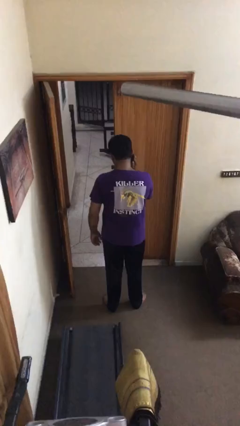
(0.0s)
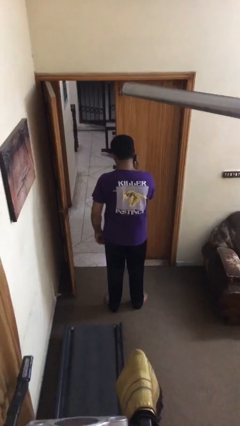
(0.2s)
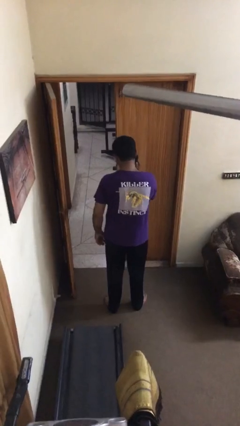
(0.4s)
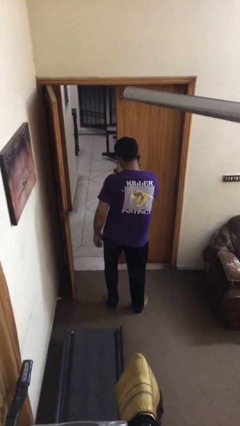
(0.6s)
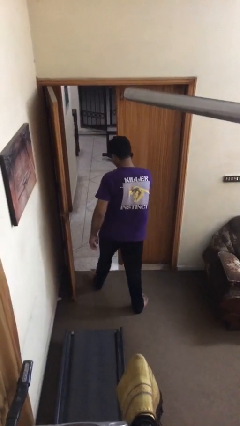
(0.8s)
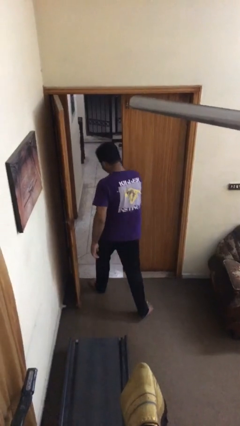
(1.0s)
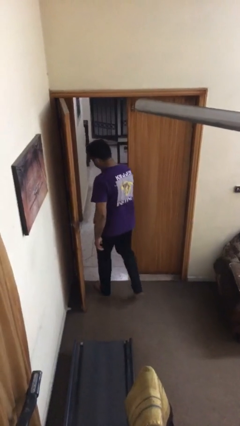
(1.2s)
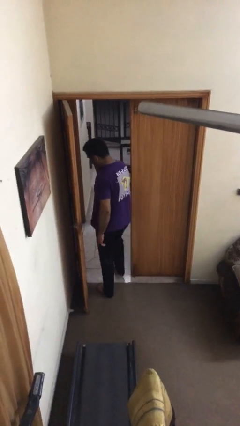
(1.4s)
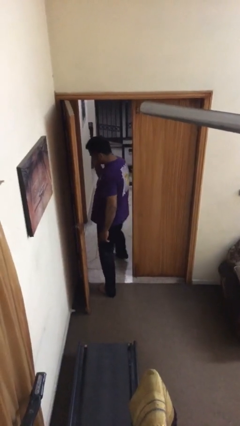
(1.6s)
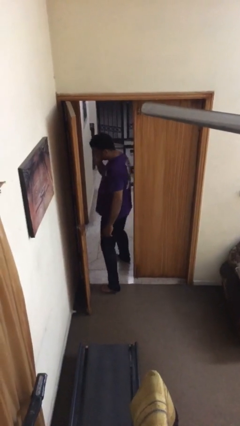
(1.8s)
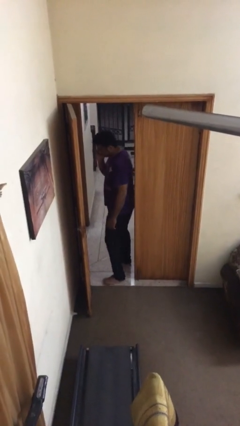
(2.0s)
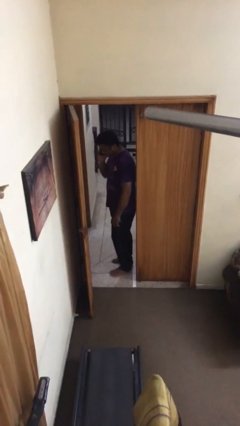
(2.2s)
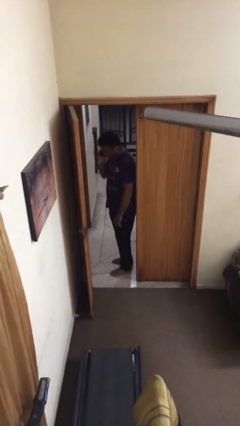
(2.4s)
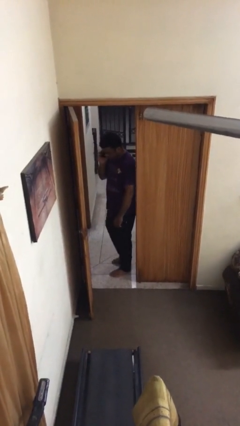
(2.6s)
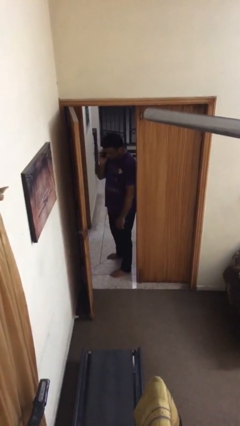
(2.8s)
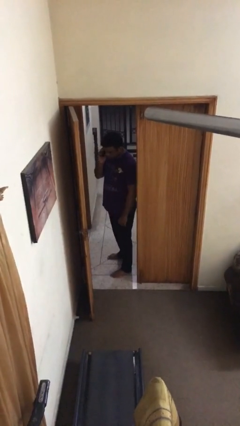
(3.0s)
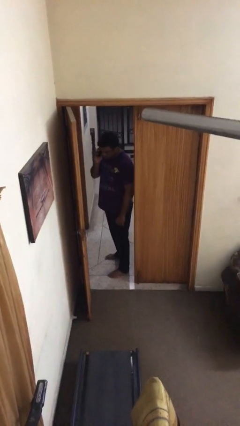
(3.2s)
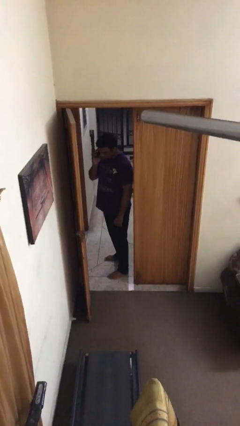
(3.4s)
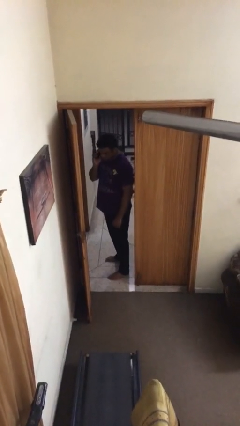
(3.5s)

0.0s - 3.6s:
person exits scene through structure

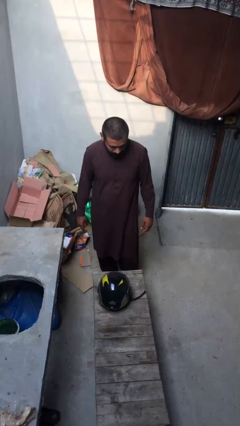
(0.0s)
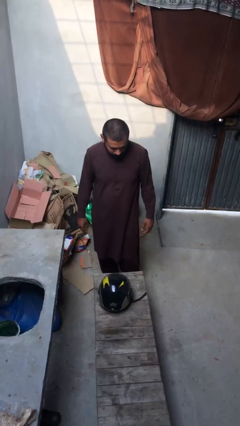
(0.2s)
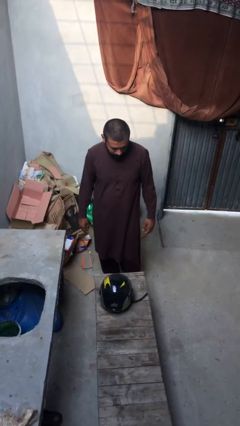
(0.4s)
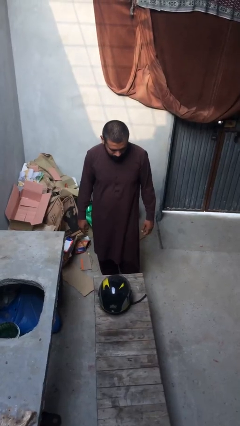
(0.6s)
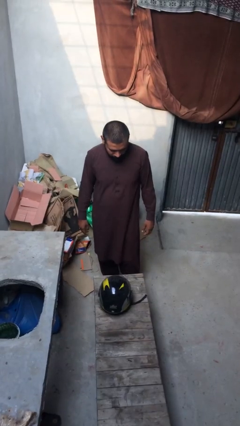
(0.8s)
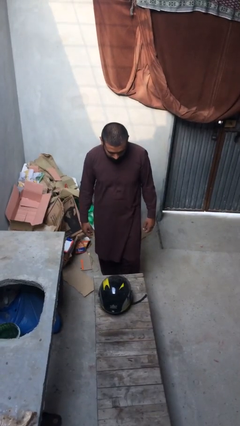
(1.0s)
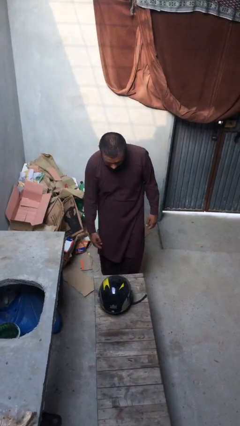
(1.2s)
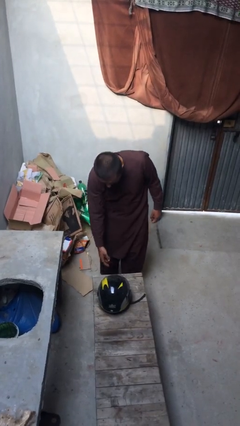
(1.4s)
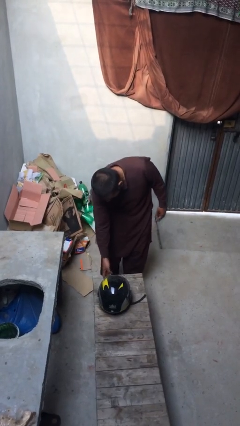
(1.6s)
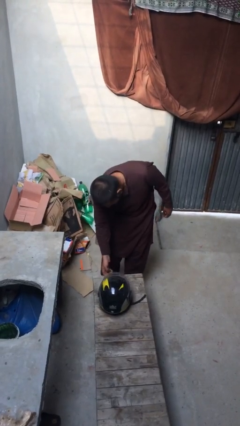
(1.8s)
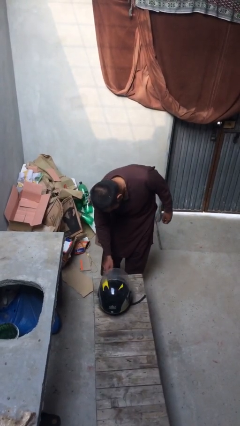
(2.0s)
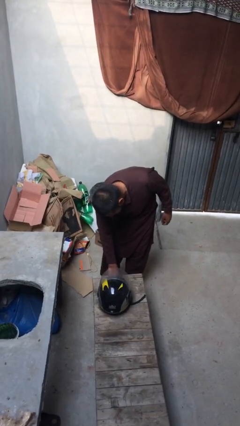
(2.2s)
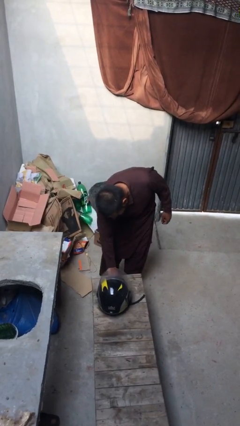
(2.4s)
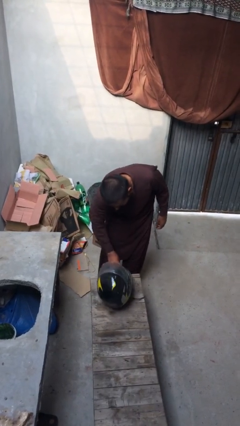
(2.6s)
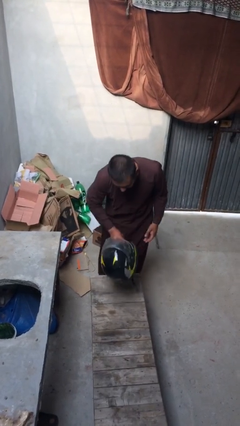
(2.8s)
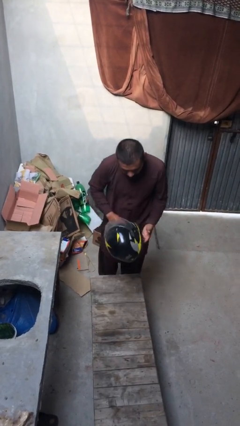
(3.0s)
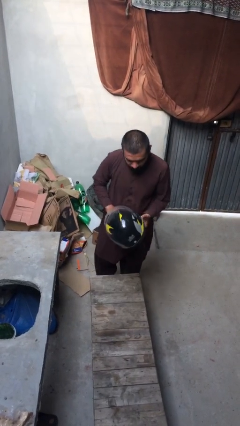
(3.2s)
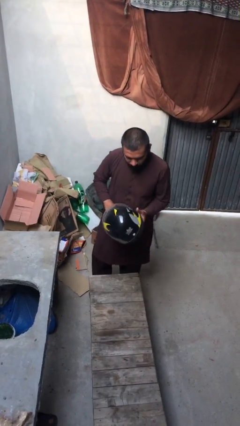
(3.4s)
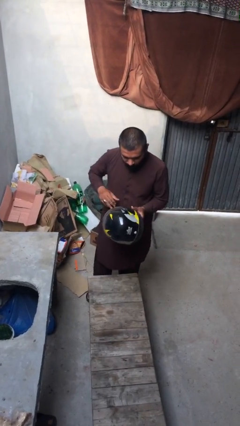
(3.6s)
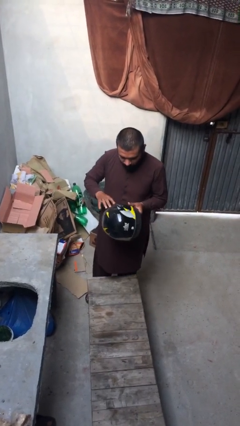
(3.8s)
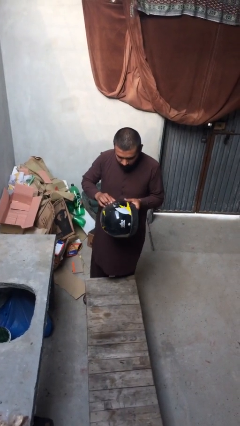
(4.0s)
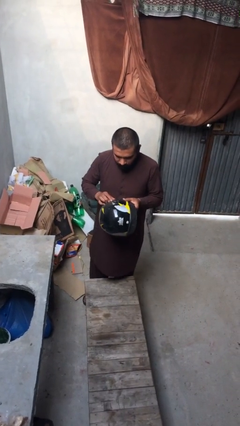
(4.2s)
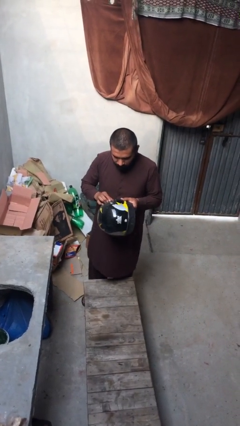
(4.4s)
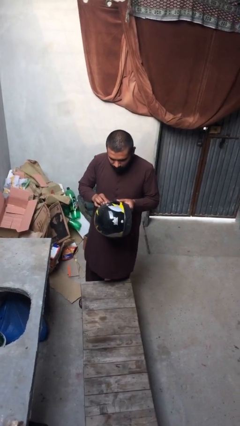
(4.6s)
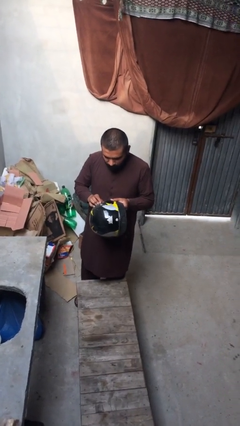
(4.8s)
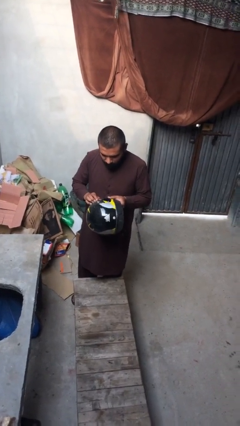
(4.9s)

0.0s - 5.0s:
person picks up object from table

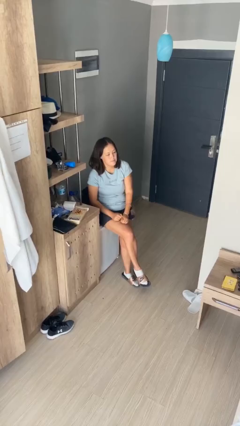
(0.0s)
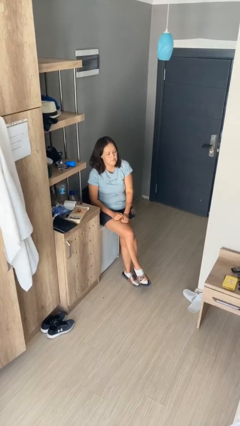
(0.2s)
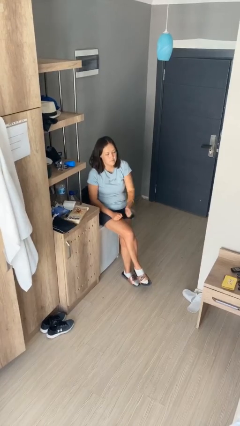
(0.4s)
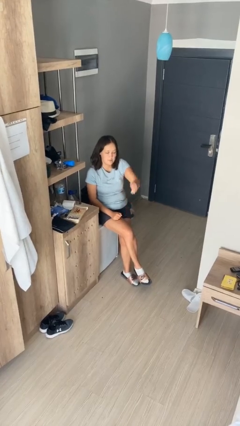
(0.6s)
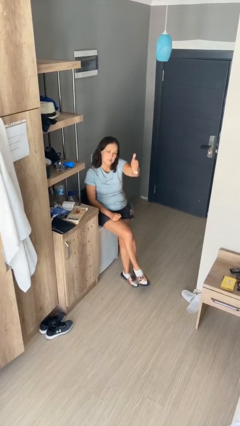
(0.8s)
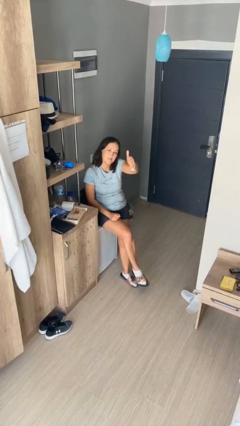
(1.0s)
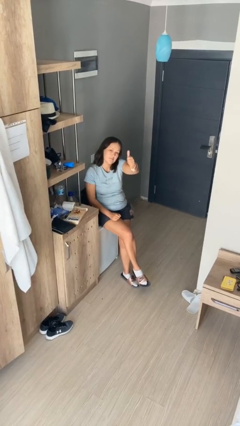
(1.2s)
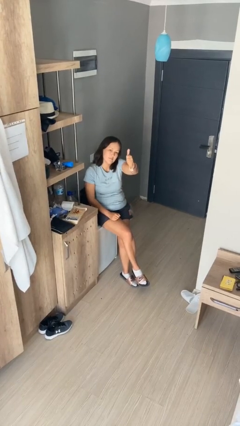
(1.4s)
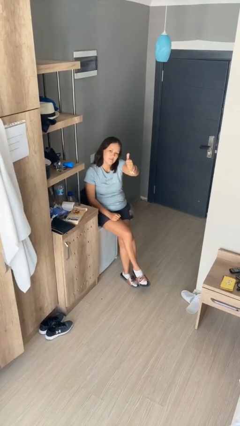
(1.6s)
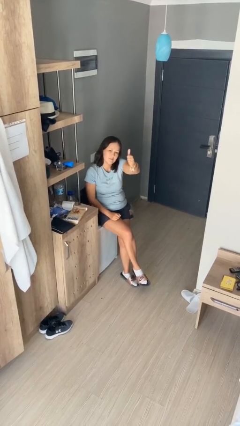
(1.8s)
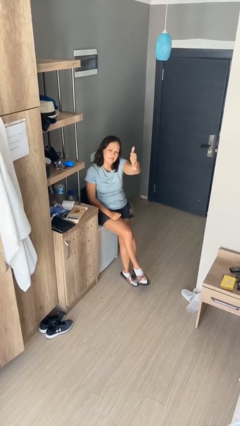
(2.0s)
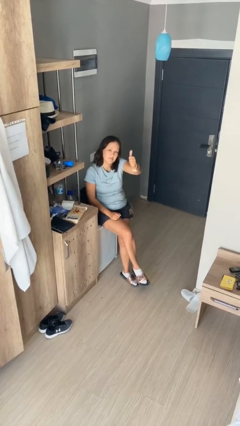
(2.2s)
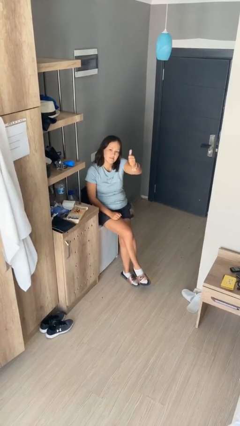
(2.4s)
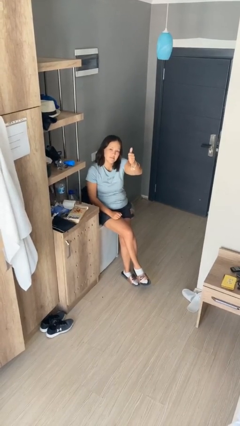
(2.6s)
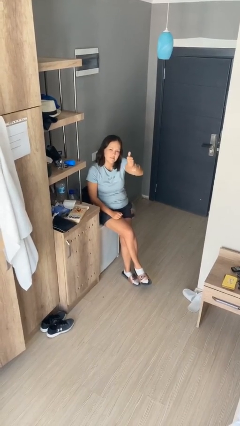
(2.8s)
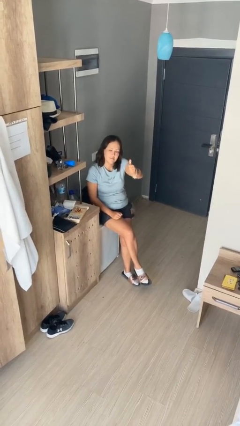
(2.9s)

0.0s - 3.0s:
person gestures thumbs up

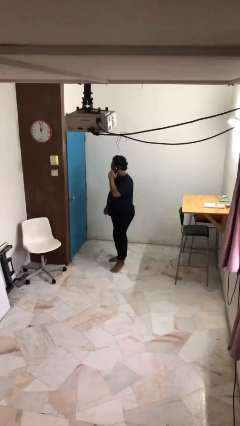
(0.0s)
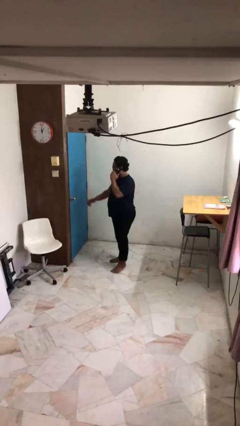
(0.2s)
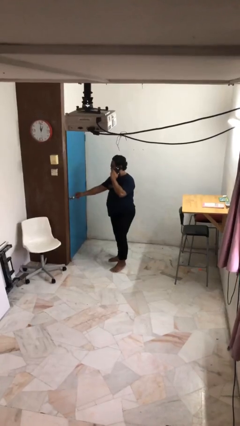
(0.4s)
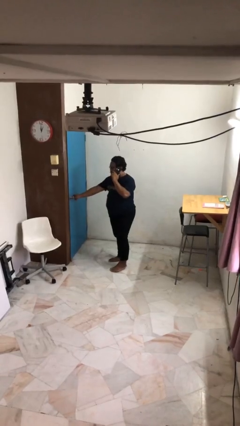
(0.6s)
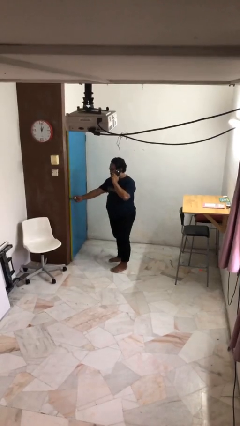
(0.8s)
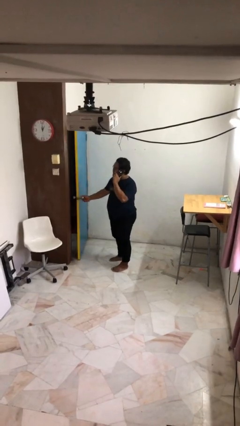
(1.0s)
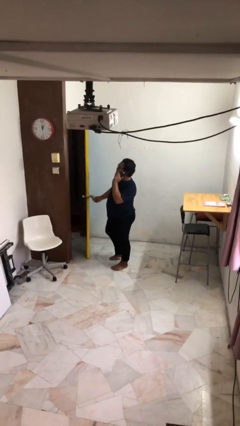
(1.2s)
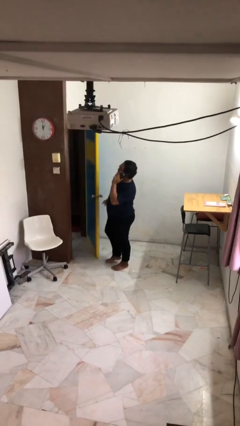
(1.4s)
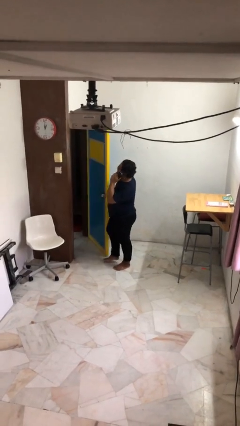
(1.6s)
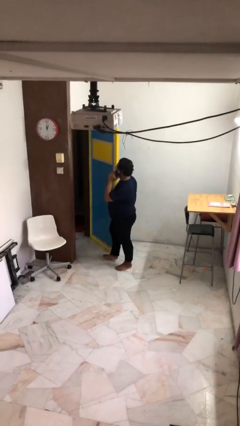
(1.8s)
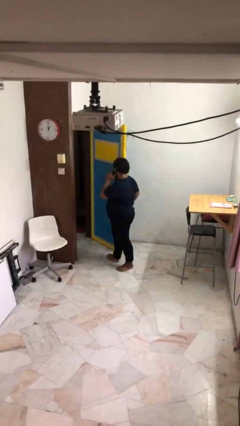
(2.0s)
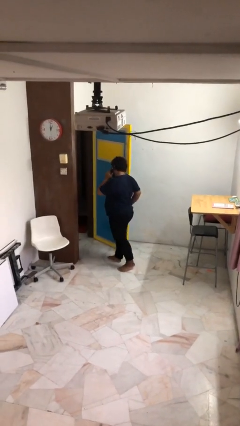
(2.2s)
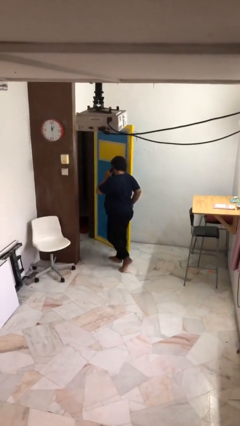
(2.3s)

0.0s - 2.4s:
person opens facility door

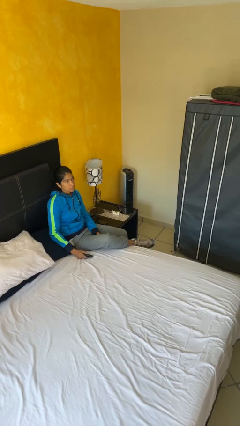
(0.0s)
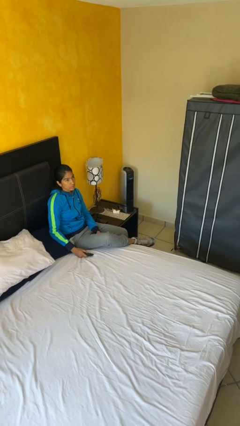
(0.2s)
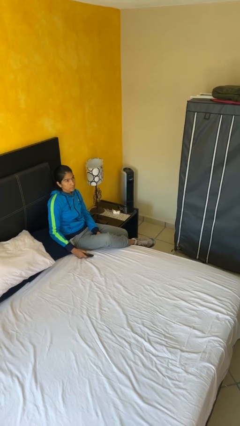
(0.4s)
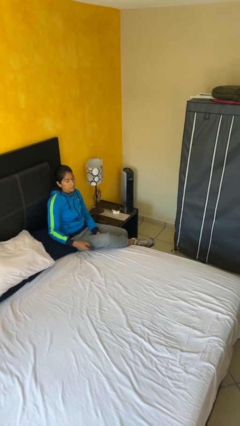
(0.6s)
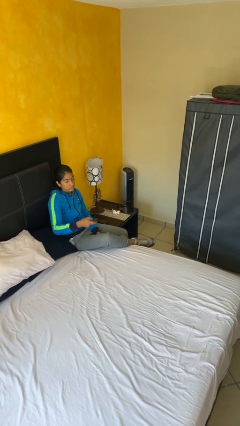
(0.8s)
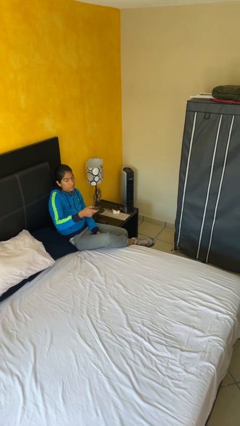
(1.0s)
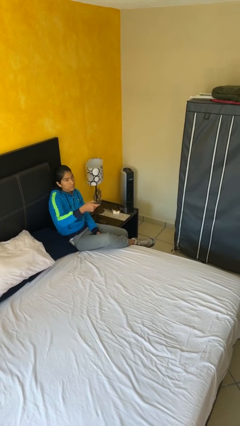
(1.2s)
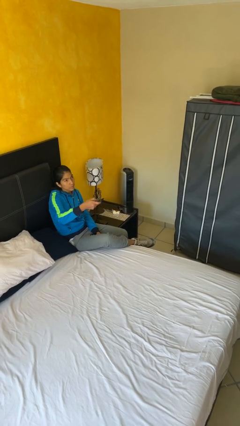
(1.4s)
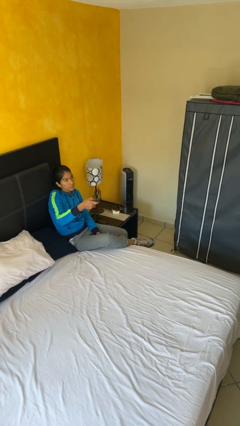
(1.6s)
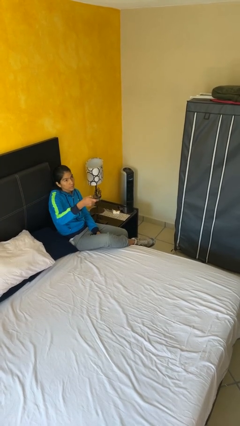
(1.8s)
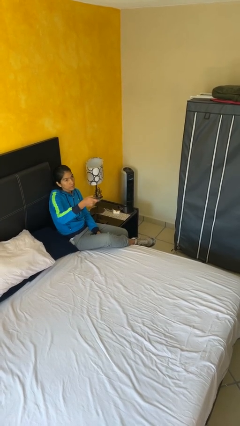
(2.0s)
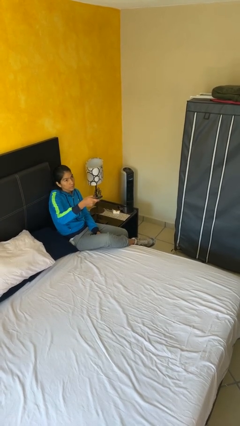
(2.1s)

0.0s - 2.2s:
person uses television remote

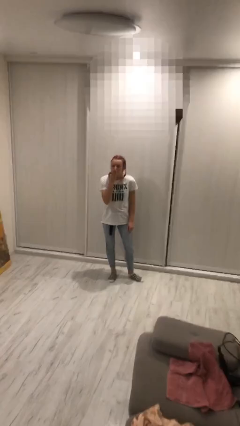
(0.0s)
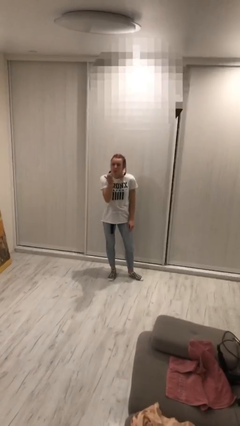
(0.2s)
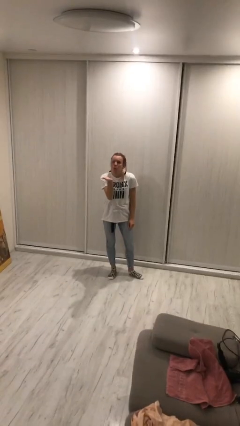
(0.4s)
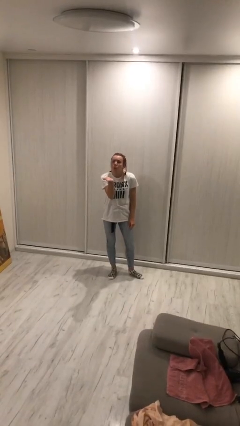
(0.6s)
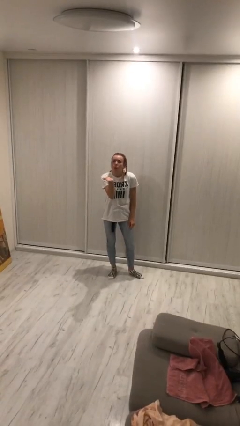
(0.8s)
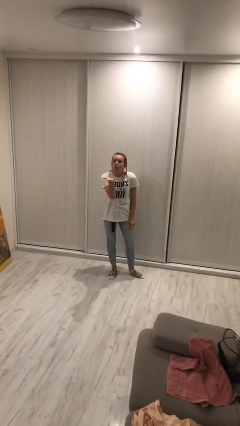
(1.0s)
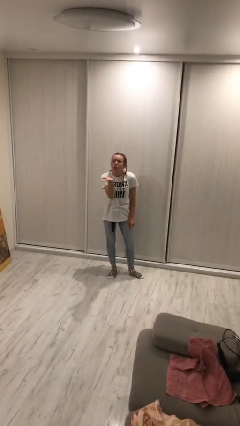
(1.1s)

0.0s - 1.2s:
person gestures blow kiss
